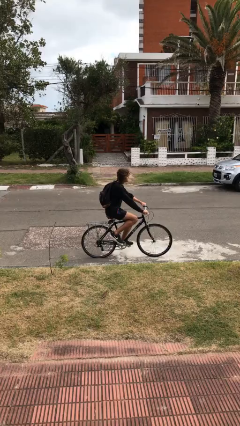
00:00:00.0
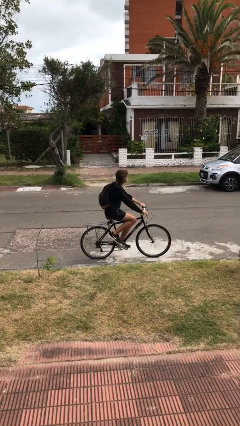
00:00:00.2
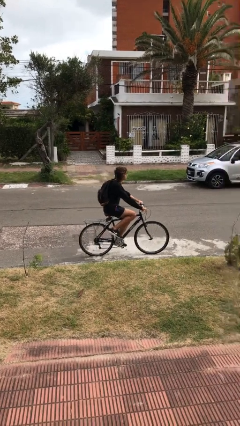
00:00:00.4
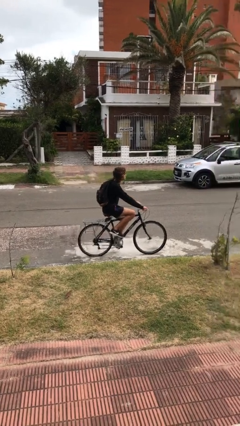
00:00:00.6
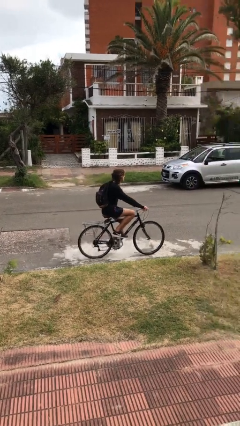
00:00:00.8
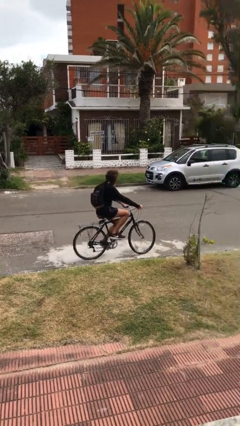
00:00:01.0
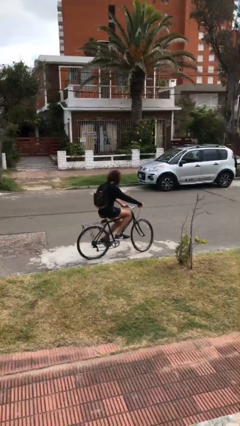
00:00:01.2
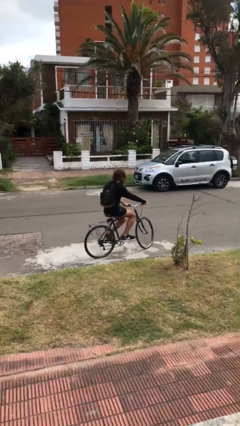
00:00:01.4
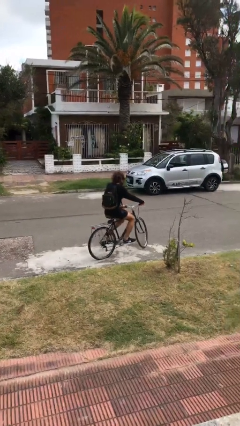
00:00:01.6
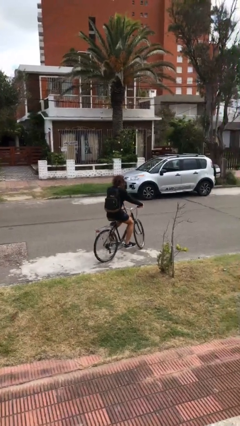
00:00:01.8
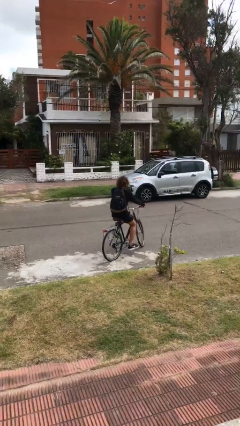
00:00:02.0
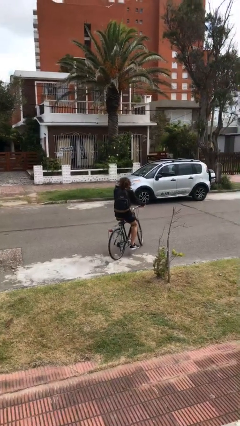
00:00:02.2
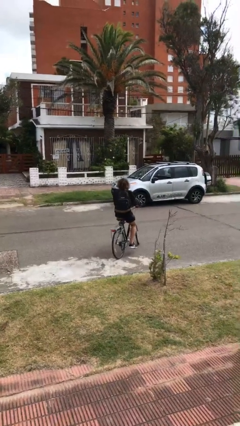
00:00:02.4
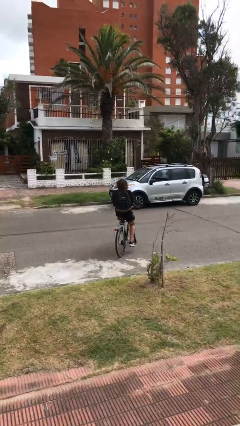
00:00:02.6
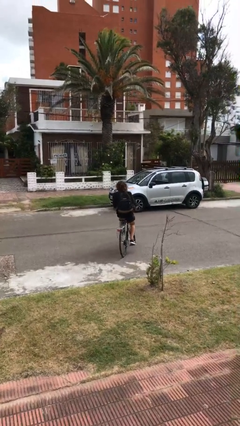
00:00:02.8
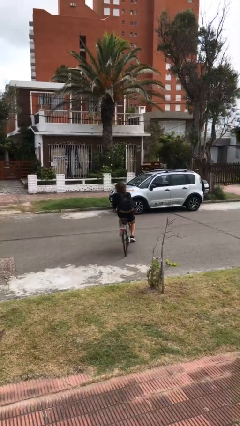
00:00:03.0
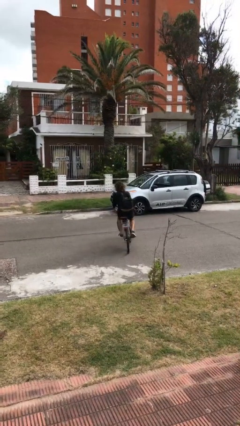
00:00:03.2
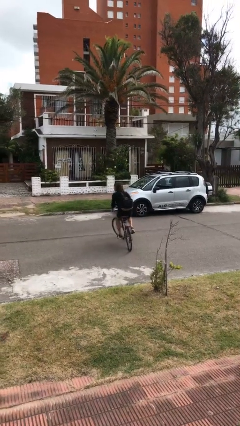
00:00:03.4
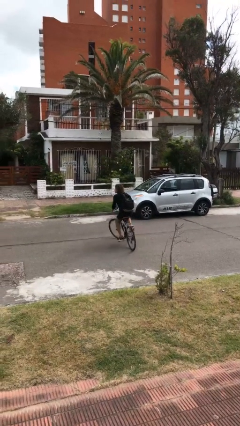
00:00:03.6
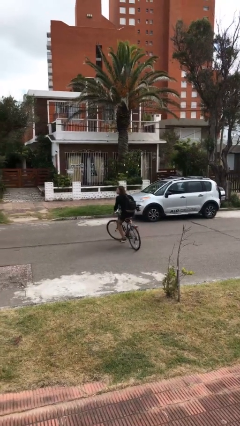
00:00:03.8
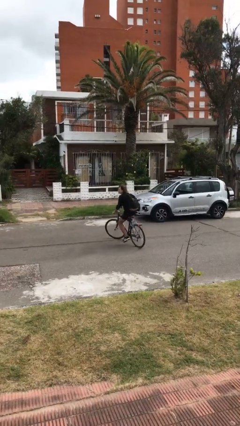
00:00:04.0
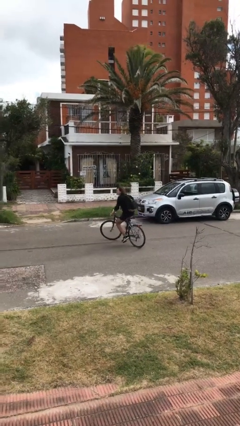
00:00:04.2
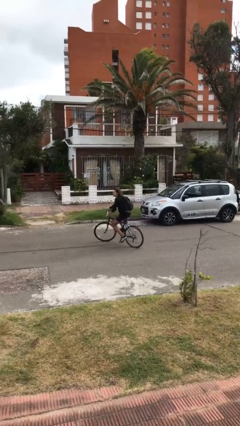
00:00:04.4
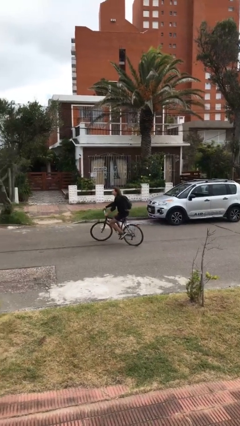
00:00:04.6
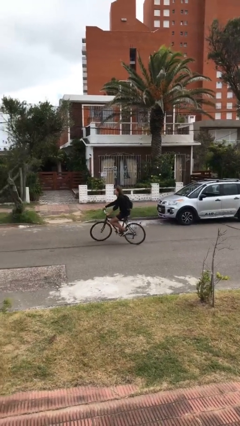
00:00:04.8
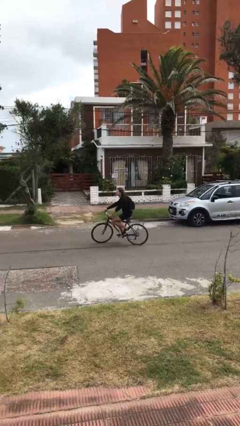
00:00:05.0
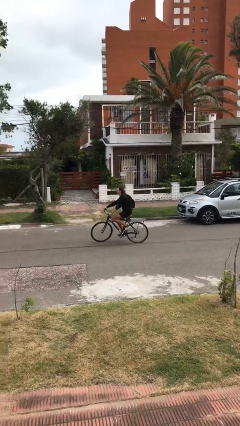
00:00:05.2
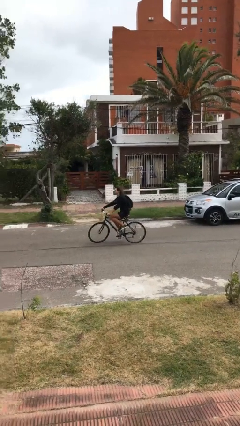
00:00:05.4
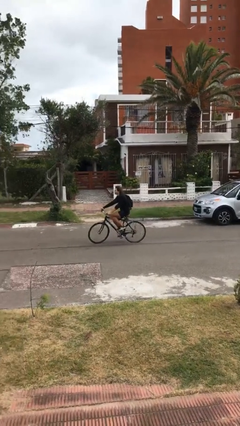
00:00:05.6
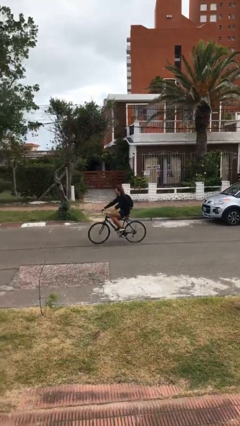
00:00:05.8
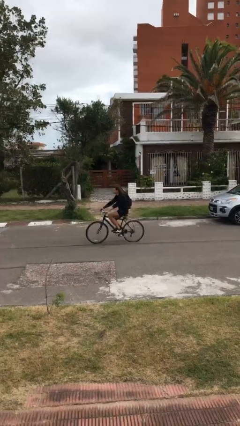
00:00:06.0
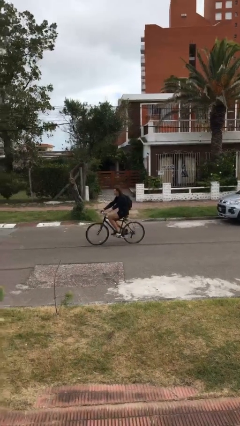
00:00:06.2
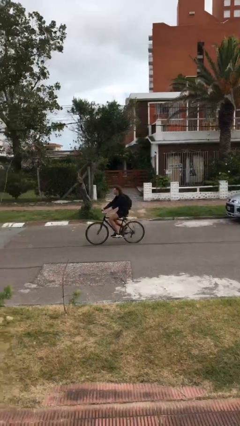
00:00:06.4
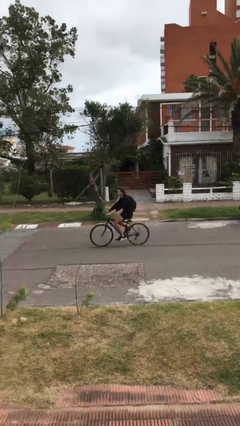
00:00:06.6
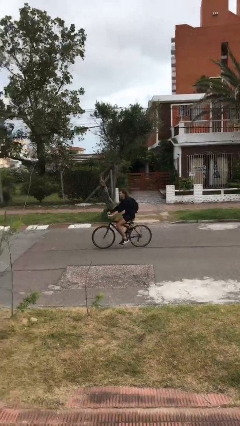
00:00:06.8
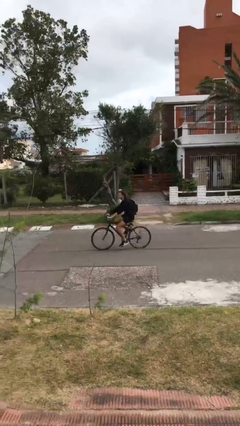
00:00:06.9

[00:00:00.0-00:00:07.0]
person rides bicycle

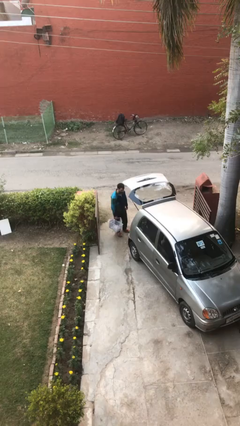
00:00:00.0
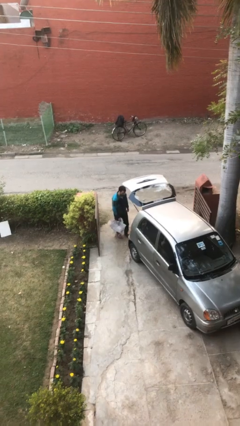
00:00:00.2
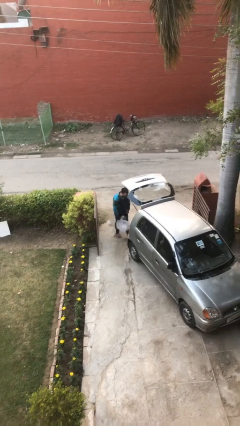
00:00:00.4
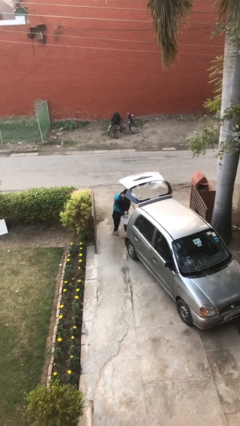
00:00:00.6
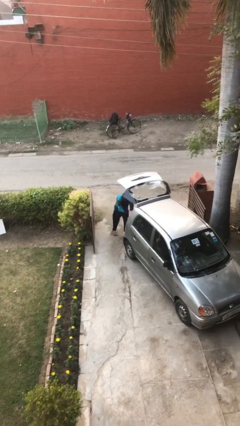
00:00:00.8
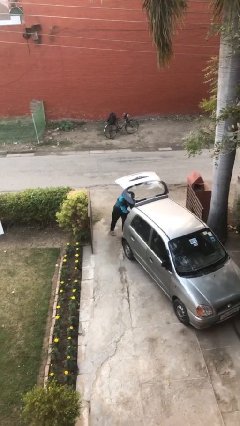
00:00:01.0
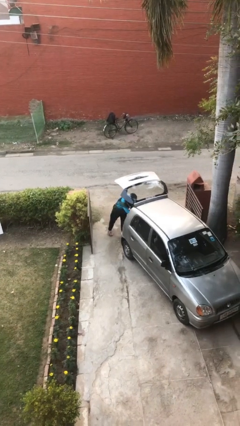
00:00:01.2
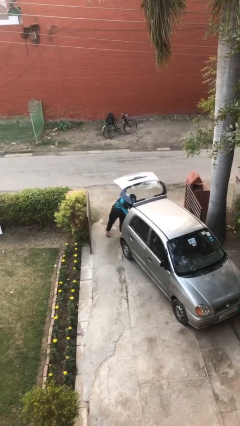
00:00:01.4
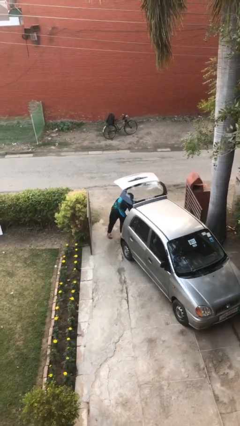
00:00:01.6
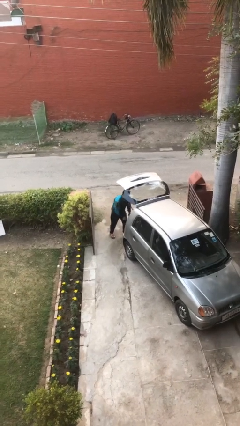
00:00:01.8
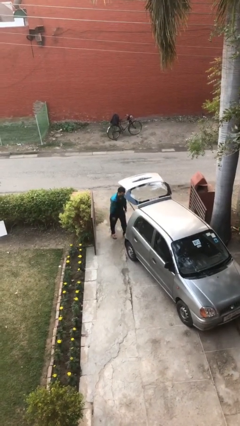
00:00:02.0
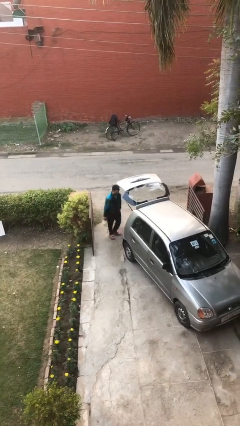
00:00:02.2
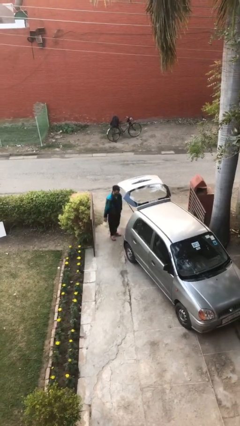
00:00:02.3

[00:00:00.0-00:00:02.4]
person loads car

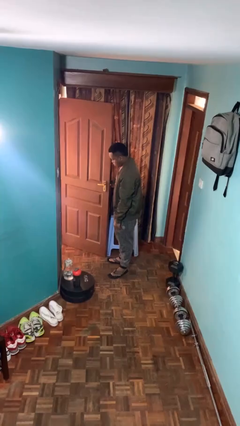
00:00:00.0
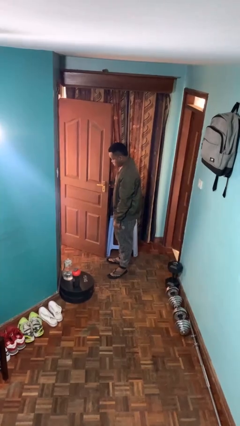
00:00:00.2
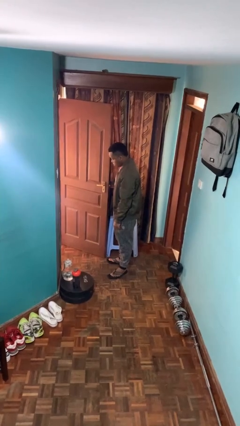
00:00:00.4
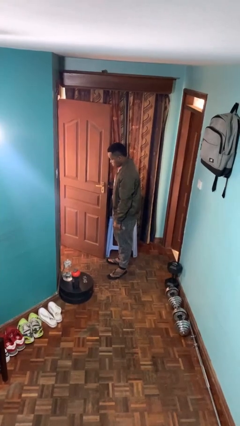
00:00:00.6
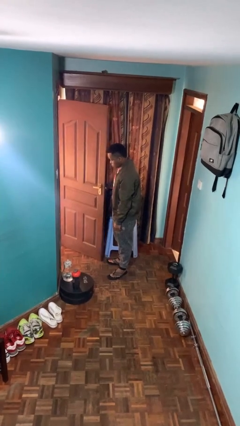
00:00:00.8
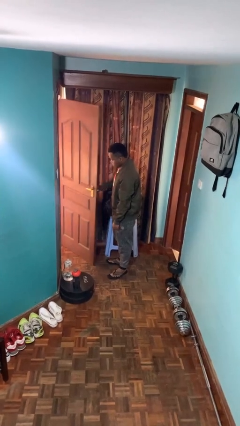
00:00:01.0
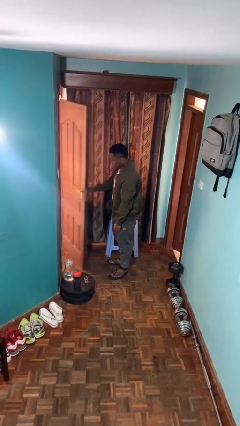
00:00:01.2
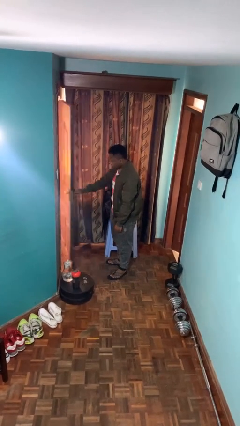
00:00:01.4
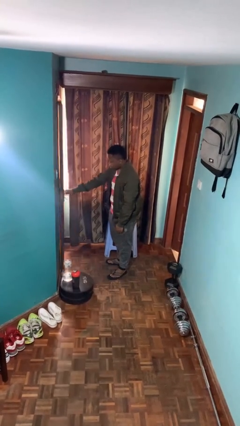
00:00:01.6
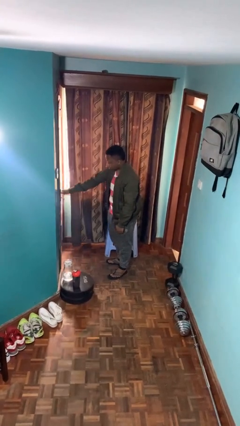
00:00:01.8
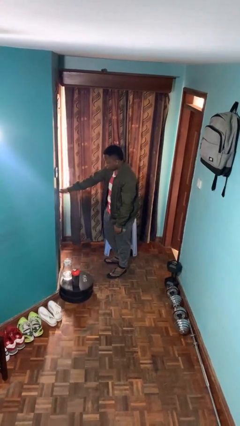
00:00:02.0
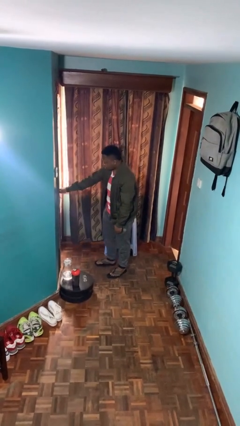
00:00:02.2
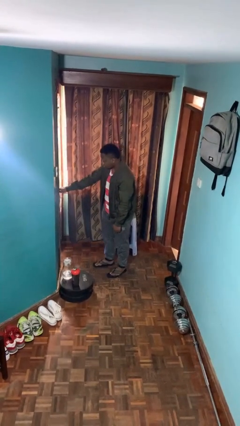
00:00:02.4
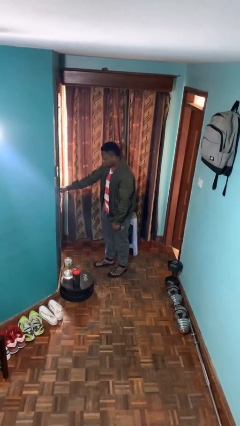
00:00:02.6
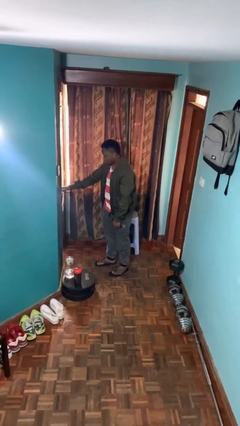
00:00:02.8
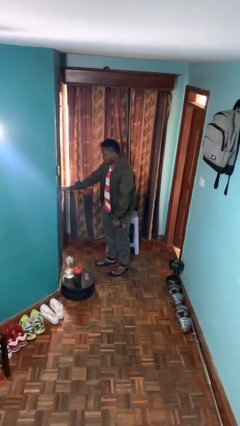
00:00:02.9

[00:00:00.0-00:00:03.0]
person closes facility door

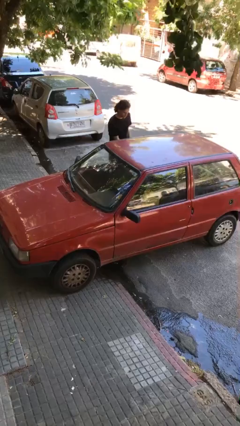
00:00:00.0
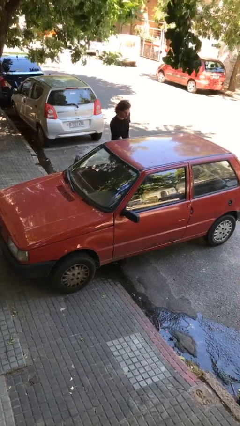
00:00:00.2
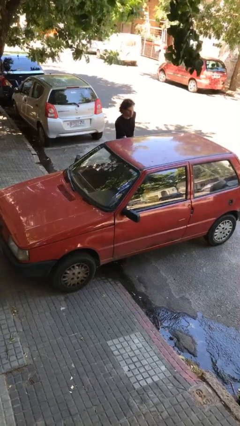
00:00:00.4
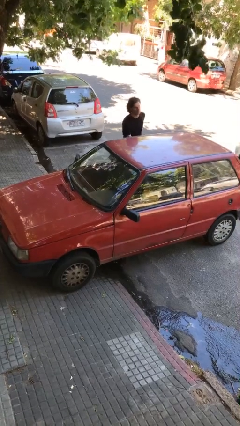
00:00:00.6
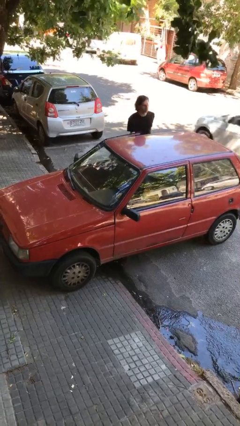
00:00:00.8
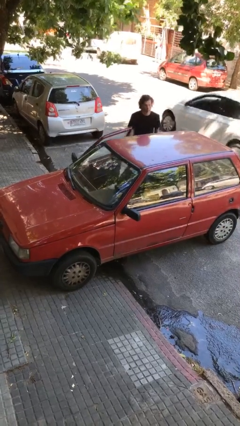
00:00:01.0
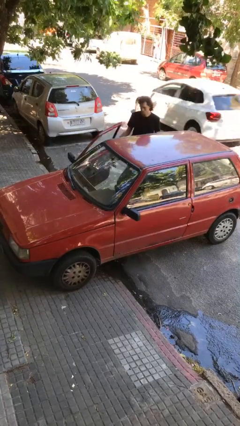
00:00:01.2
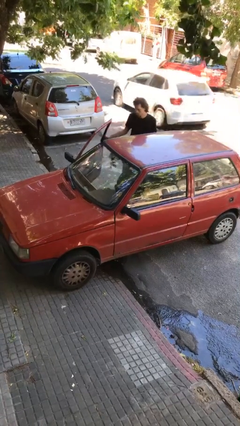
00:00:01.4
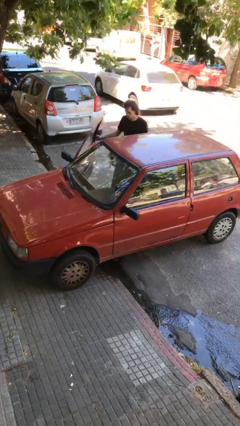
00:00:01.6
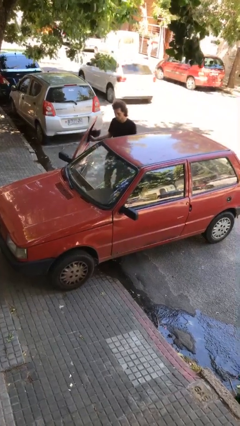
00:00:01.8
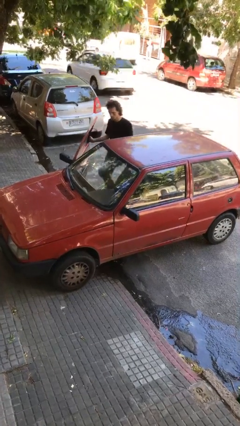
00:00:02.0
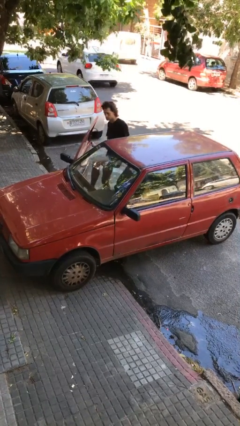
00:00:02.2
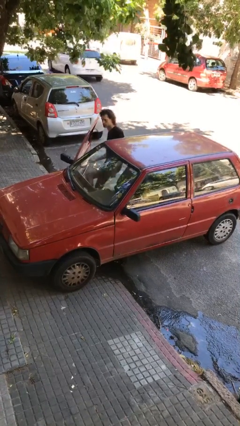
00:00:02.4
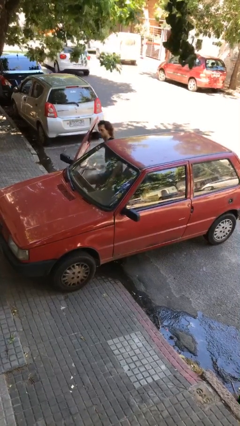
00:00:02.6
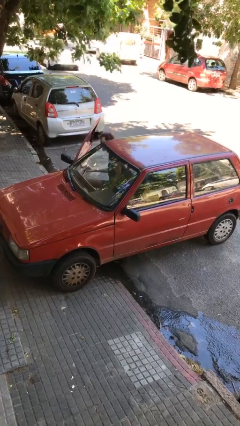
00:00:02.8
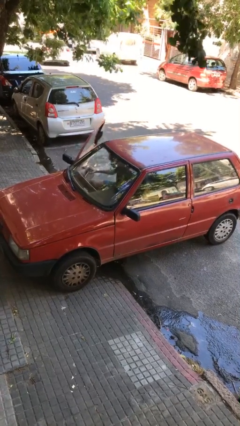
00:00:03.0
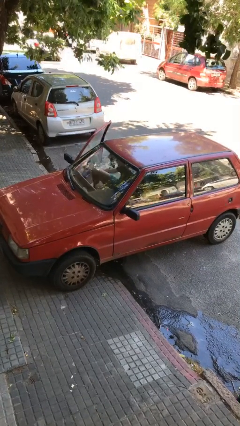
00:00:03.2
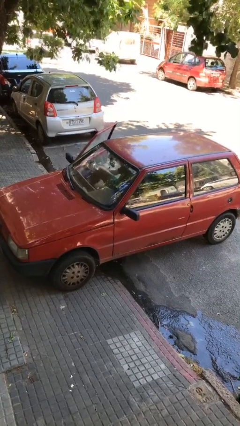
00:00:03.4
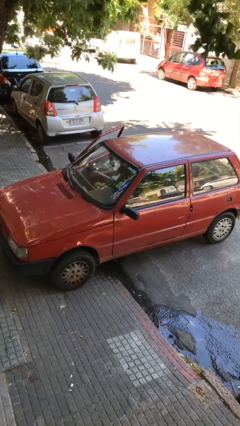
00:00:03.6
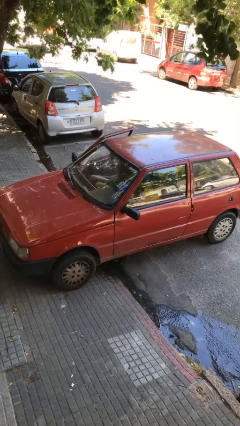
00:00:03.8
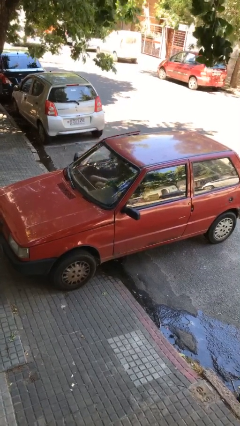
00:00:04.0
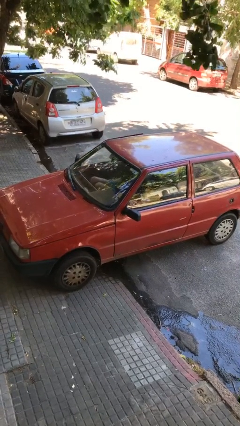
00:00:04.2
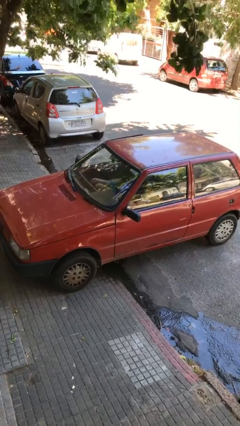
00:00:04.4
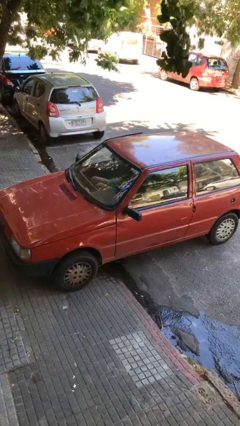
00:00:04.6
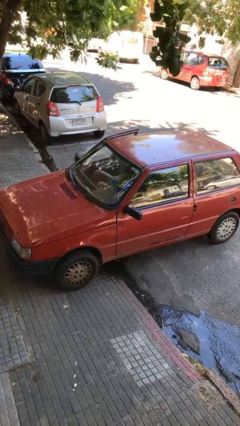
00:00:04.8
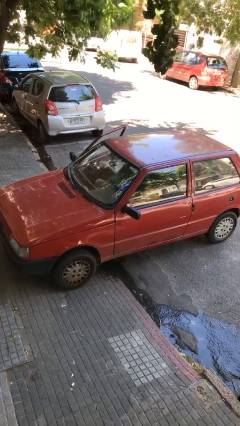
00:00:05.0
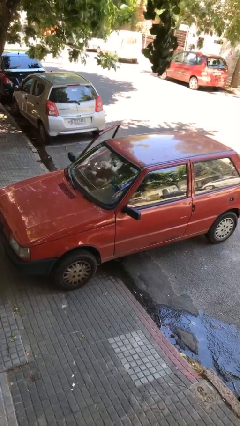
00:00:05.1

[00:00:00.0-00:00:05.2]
car picks up person
